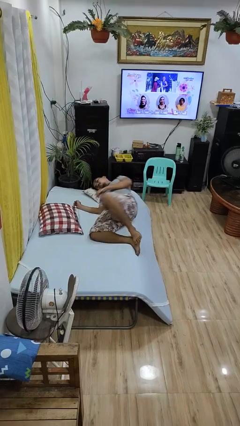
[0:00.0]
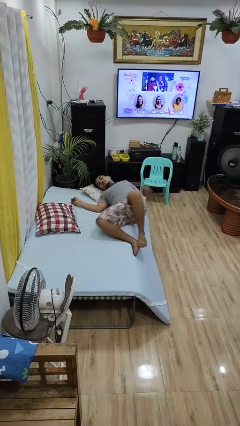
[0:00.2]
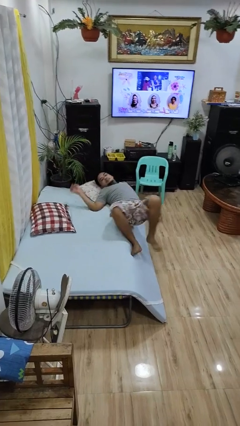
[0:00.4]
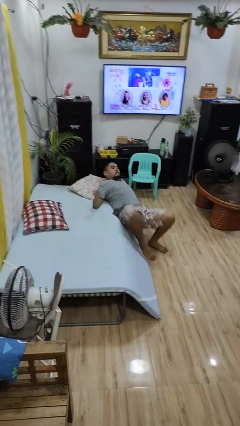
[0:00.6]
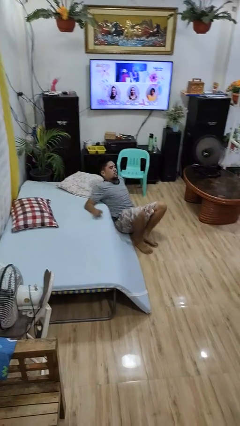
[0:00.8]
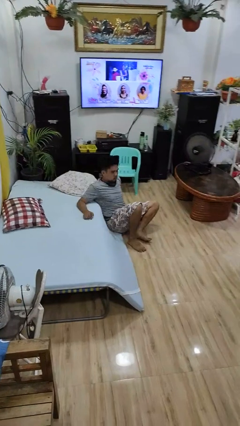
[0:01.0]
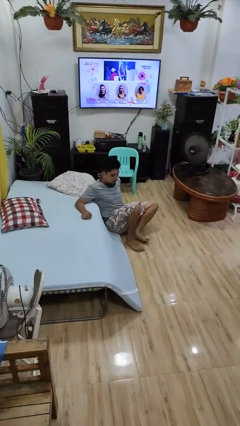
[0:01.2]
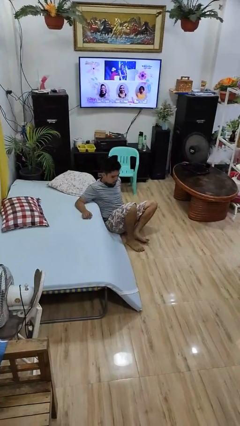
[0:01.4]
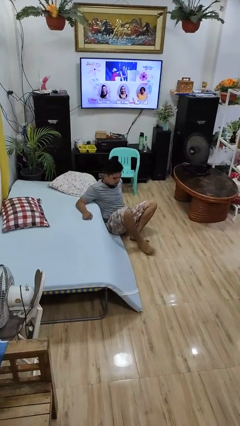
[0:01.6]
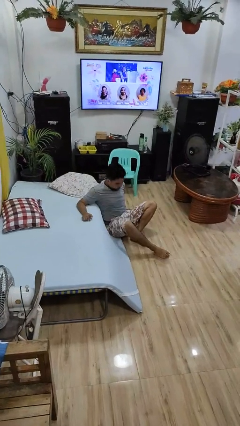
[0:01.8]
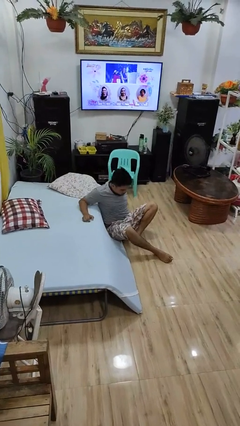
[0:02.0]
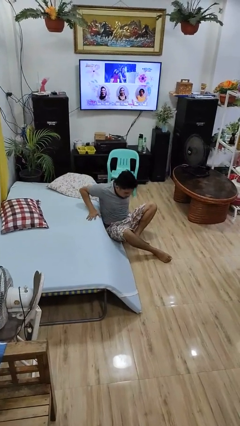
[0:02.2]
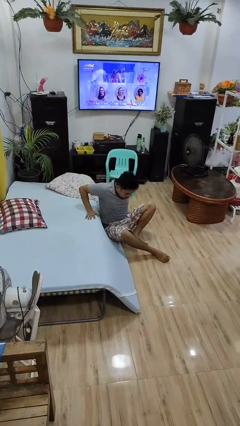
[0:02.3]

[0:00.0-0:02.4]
person falls from bed

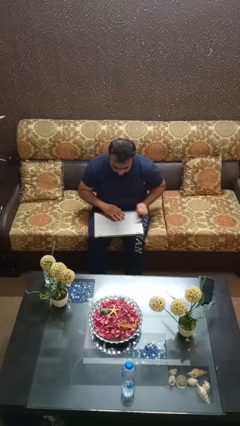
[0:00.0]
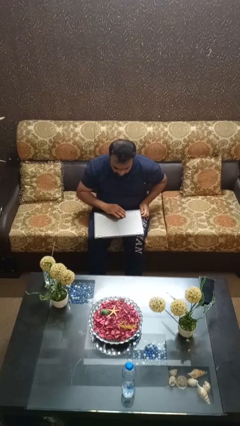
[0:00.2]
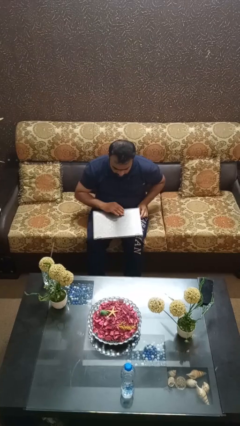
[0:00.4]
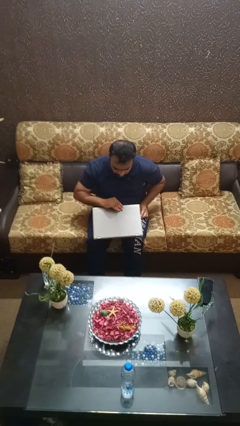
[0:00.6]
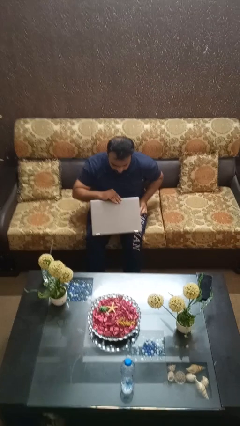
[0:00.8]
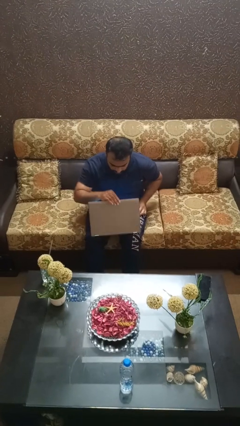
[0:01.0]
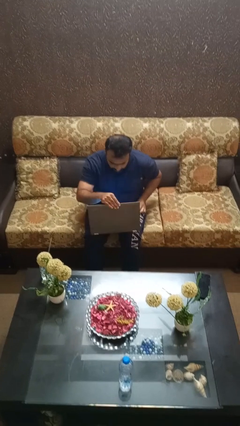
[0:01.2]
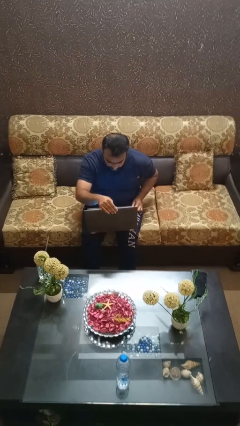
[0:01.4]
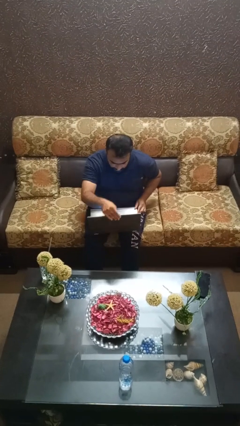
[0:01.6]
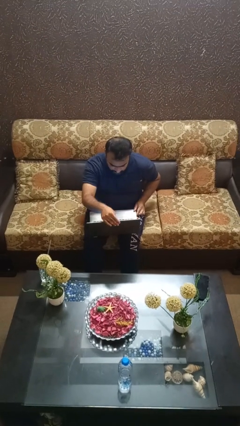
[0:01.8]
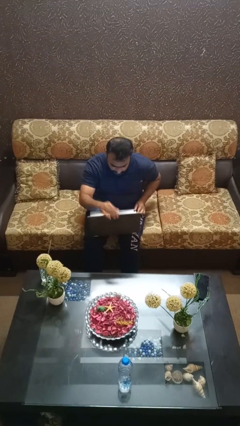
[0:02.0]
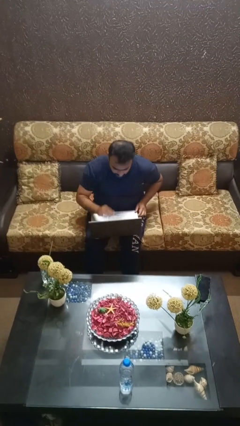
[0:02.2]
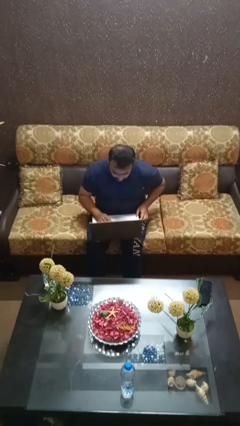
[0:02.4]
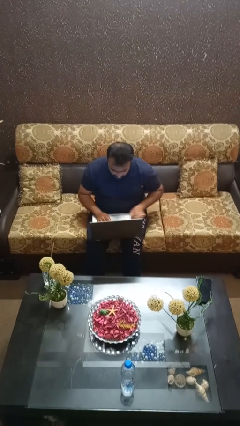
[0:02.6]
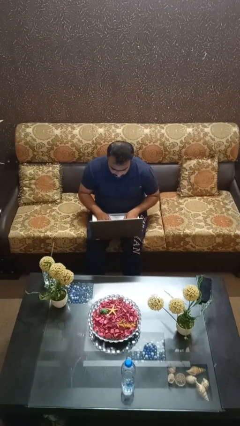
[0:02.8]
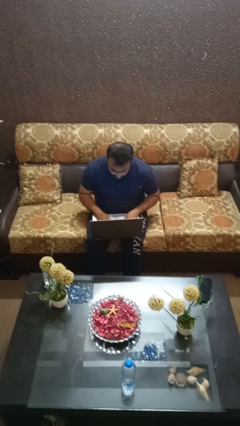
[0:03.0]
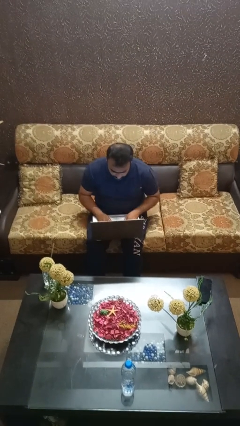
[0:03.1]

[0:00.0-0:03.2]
person opens laptop

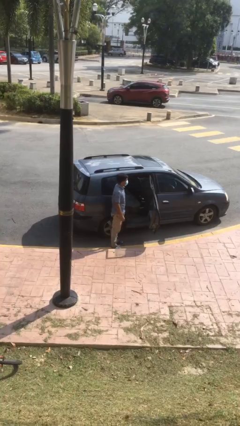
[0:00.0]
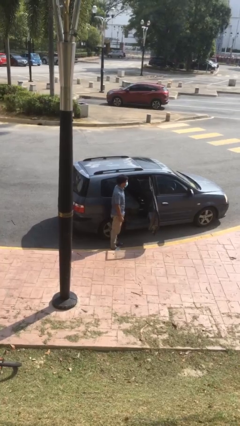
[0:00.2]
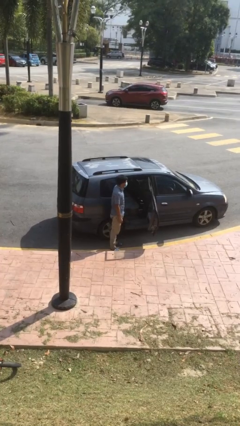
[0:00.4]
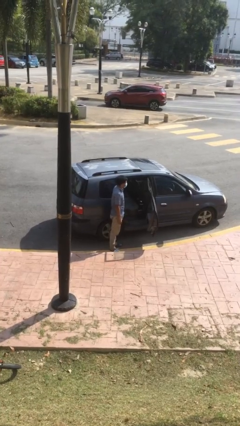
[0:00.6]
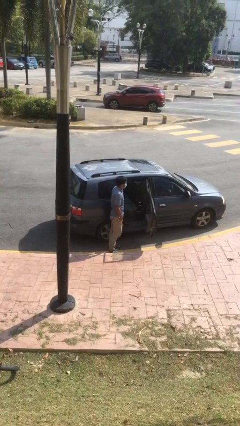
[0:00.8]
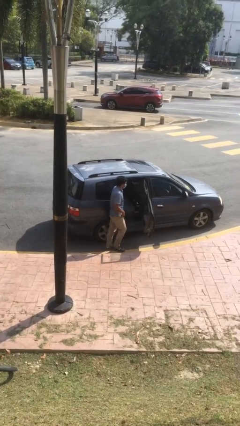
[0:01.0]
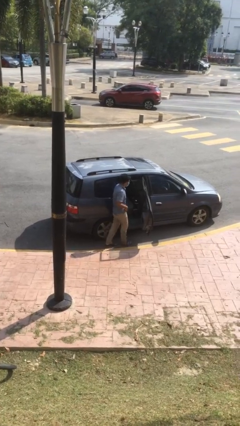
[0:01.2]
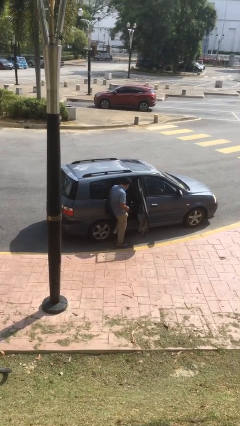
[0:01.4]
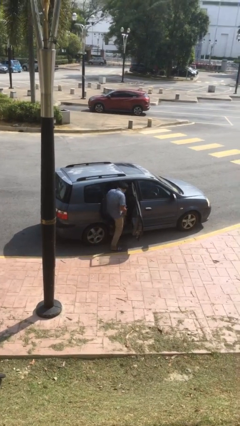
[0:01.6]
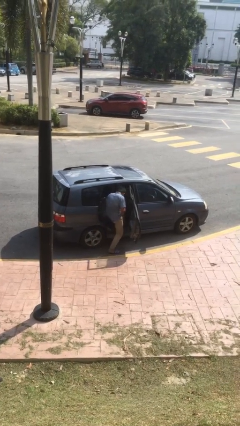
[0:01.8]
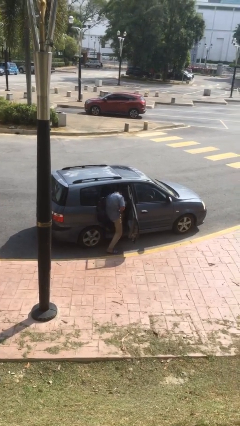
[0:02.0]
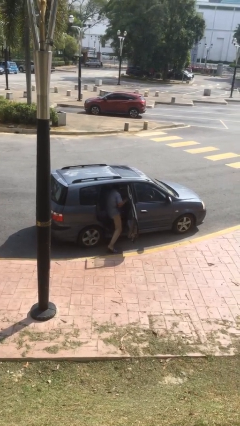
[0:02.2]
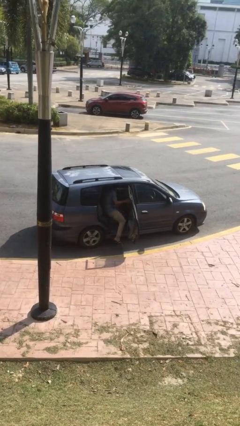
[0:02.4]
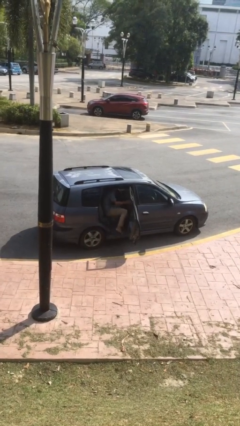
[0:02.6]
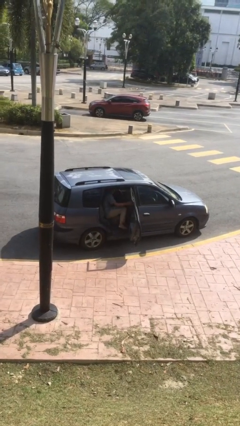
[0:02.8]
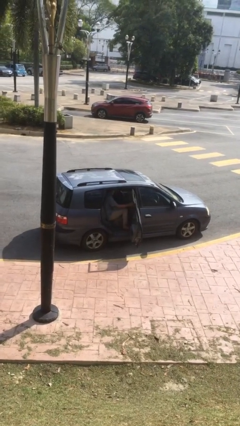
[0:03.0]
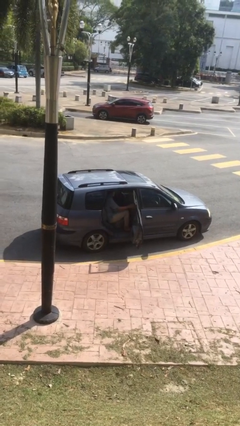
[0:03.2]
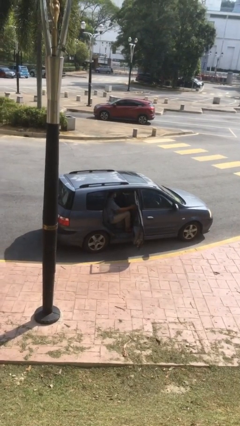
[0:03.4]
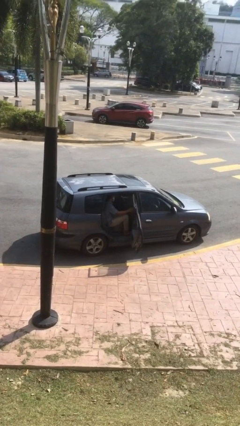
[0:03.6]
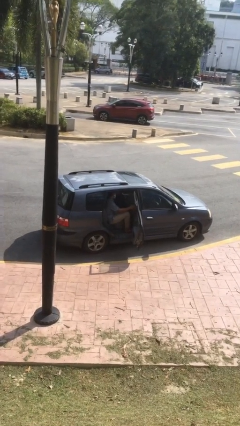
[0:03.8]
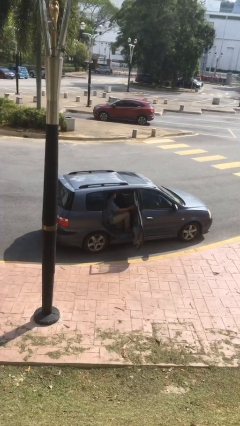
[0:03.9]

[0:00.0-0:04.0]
person enters car

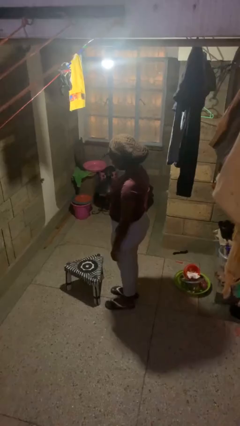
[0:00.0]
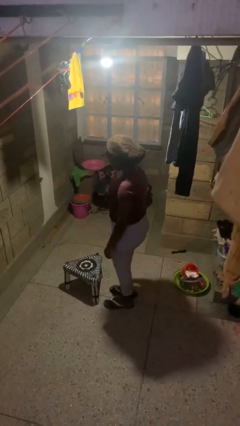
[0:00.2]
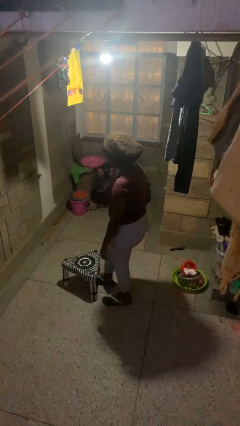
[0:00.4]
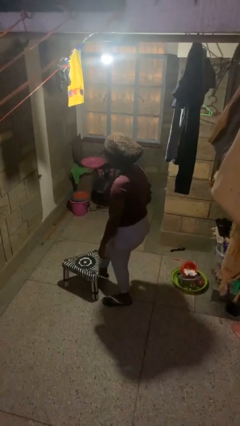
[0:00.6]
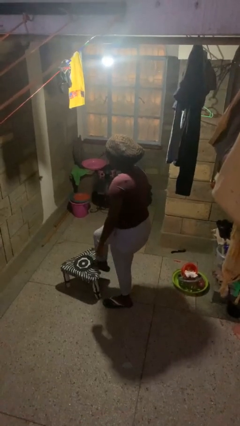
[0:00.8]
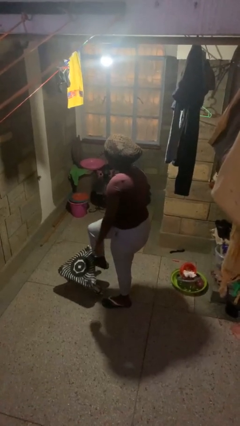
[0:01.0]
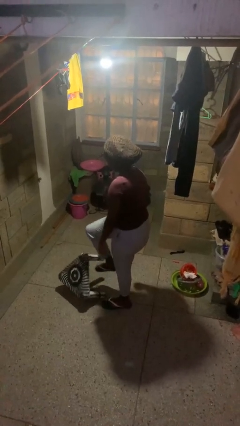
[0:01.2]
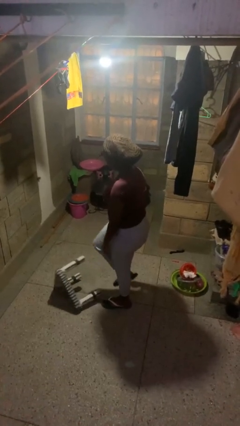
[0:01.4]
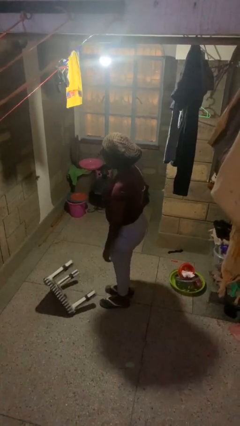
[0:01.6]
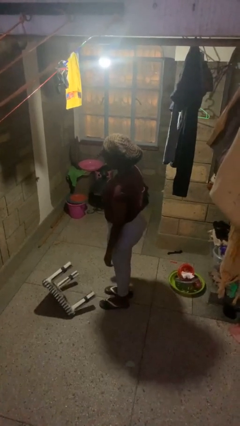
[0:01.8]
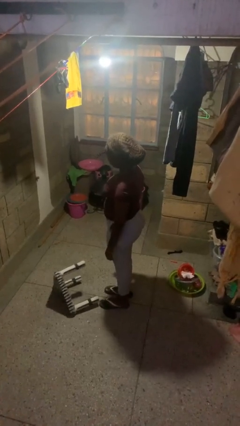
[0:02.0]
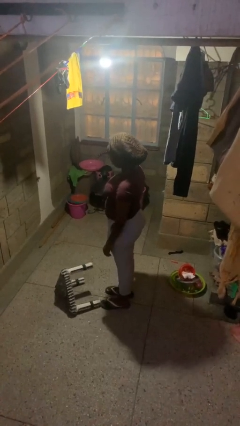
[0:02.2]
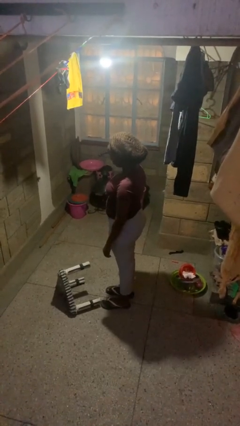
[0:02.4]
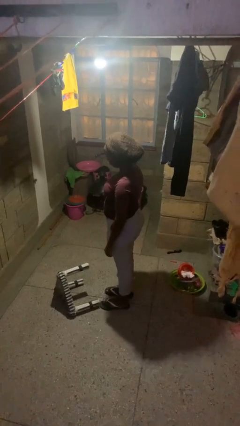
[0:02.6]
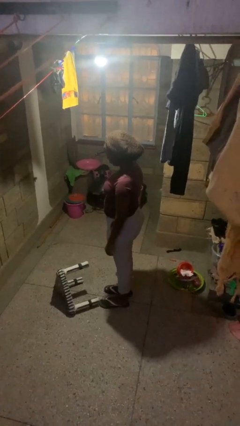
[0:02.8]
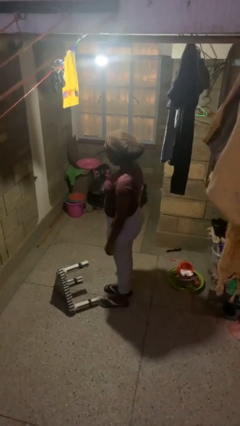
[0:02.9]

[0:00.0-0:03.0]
person knocks over furniture

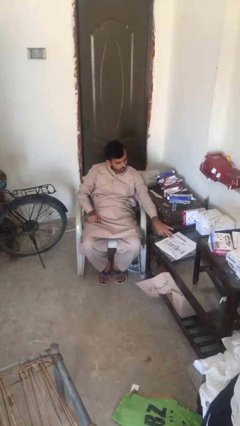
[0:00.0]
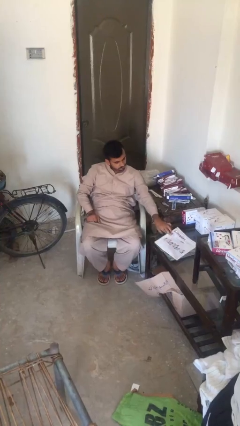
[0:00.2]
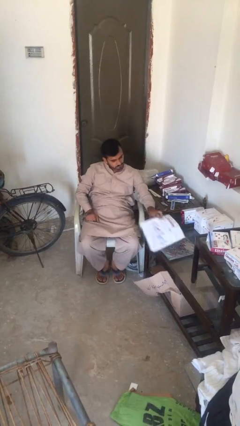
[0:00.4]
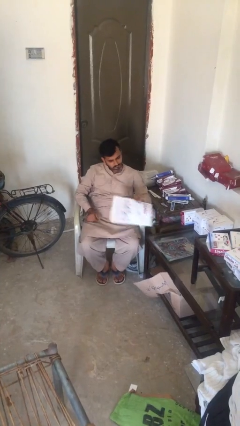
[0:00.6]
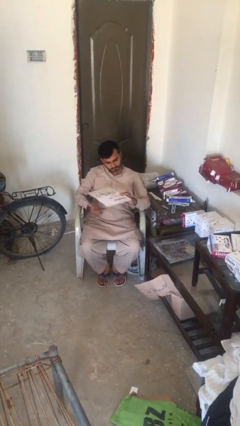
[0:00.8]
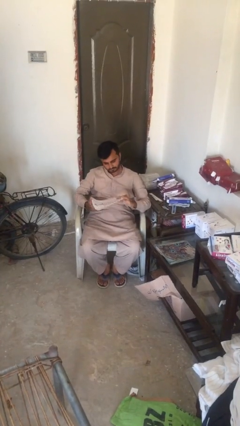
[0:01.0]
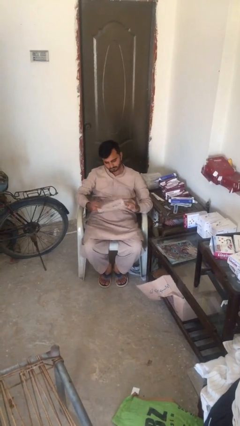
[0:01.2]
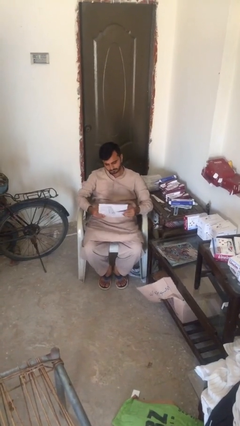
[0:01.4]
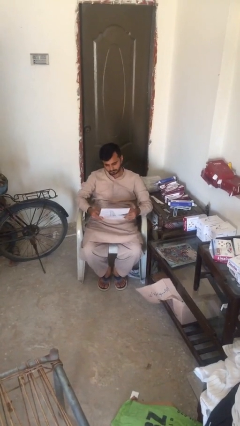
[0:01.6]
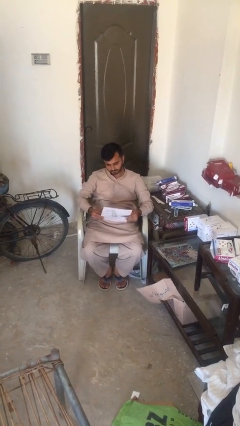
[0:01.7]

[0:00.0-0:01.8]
person picks up object from table

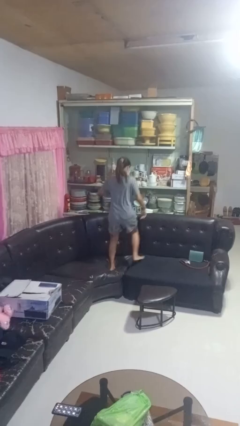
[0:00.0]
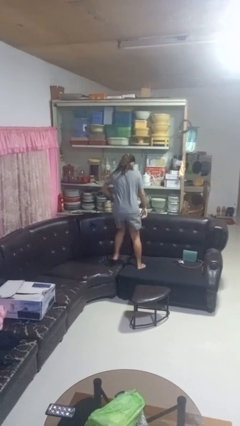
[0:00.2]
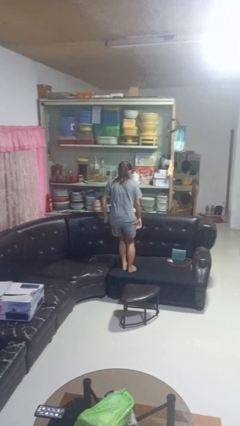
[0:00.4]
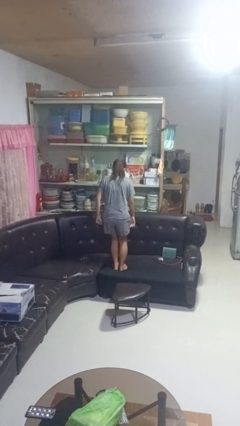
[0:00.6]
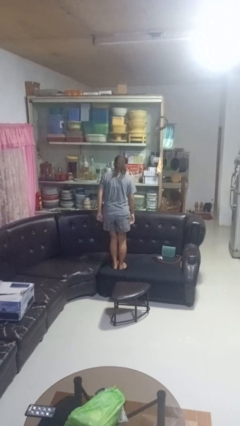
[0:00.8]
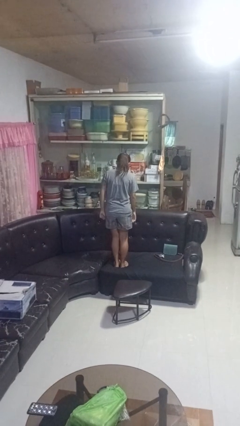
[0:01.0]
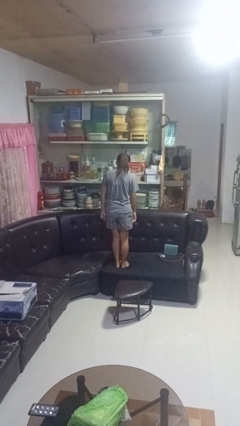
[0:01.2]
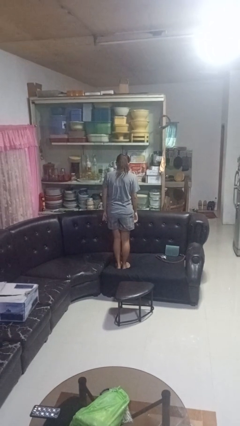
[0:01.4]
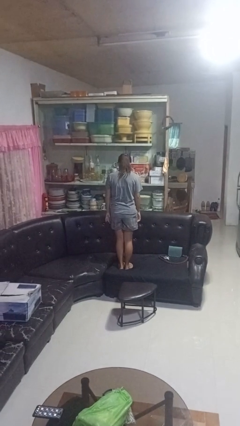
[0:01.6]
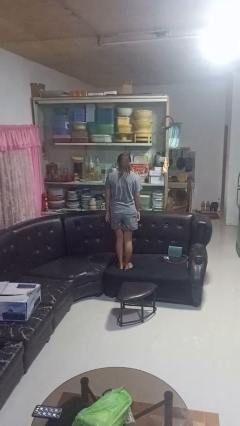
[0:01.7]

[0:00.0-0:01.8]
person jumps on couch

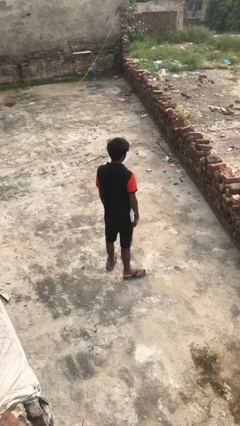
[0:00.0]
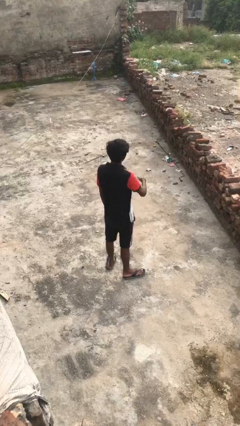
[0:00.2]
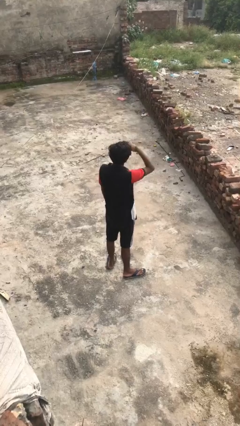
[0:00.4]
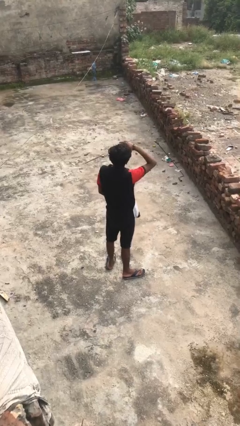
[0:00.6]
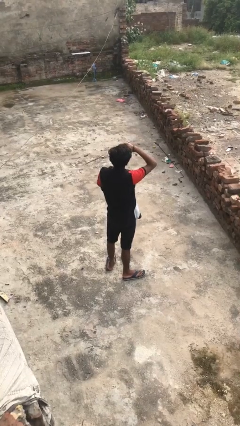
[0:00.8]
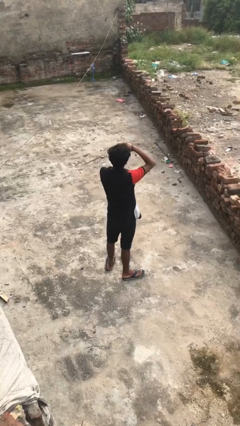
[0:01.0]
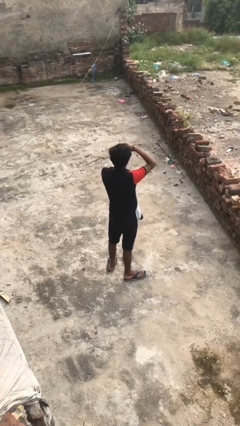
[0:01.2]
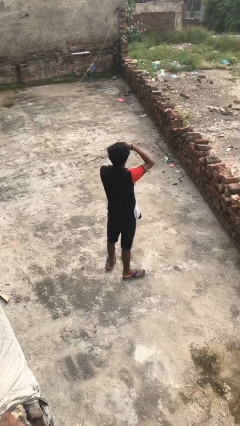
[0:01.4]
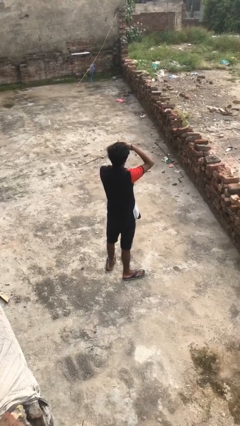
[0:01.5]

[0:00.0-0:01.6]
person shades eyes
